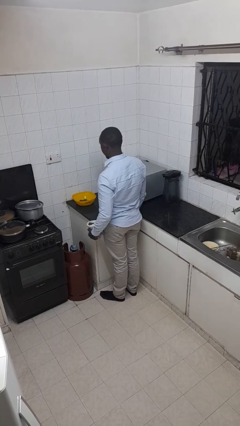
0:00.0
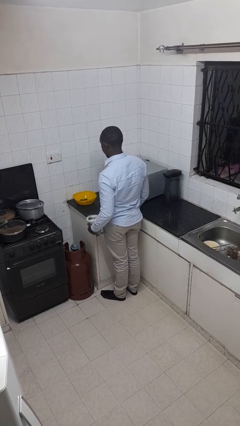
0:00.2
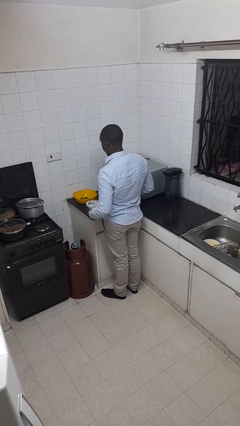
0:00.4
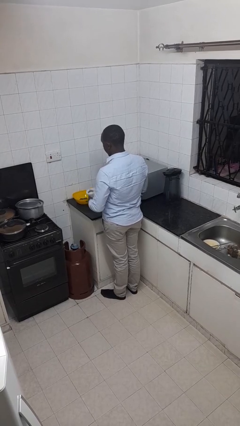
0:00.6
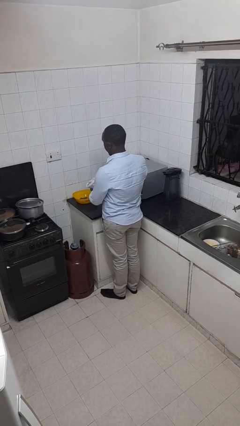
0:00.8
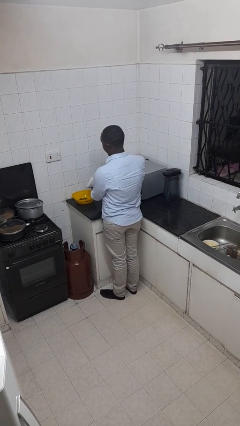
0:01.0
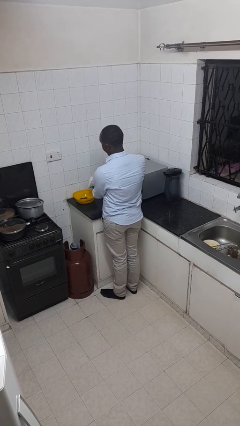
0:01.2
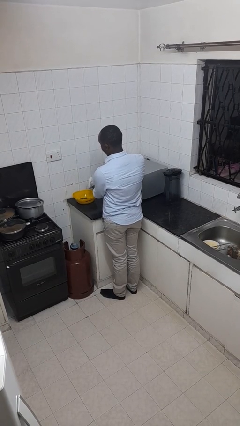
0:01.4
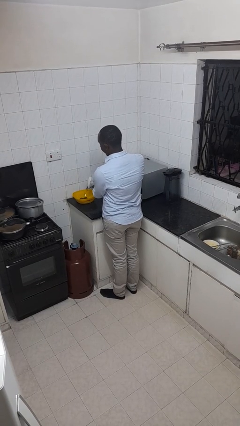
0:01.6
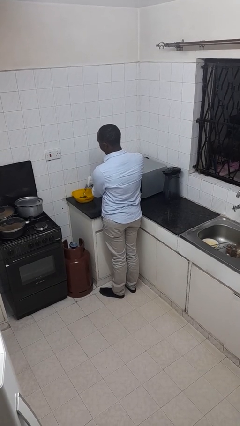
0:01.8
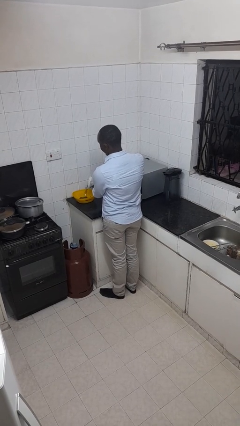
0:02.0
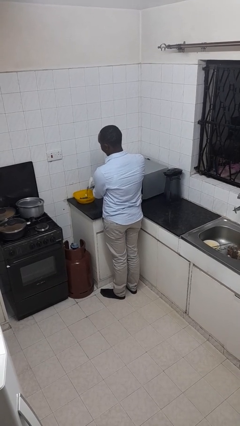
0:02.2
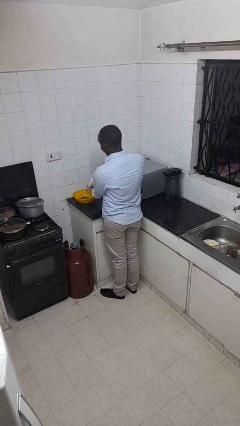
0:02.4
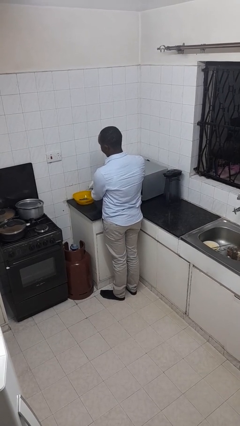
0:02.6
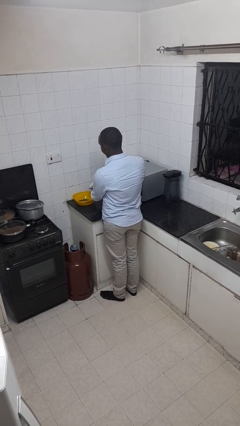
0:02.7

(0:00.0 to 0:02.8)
person pours into bowl

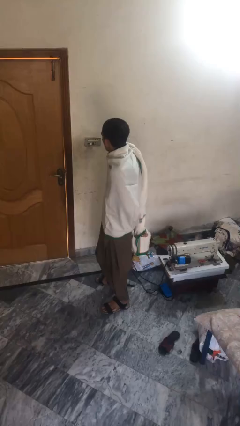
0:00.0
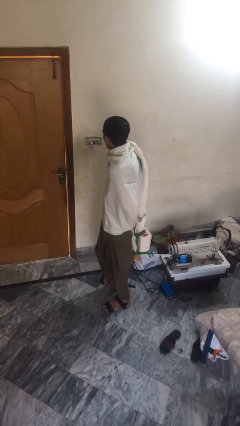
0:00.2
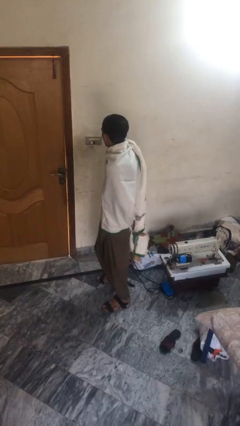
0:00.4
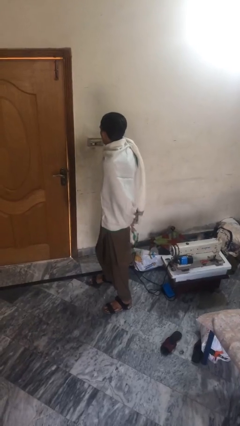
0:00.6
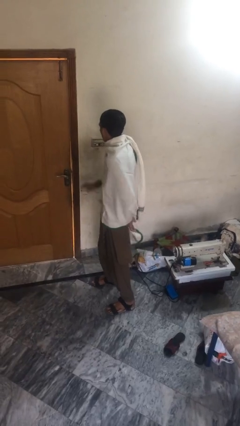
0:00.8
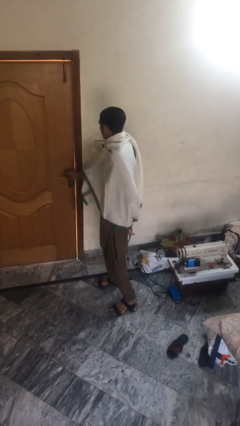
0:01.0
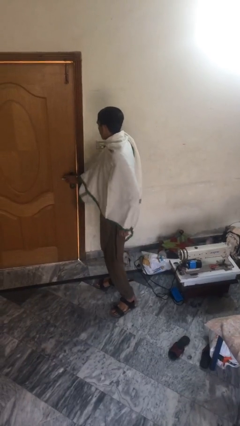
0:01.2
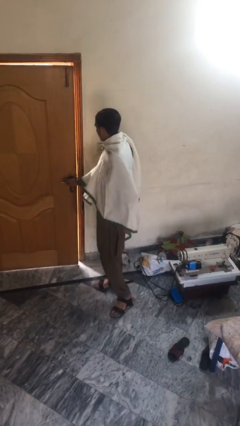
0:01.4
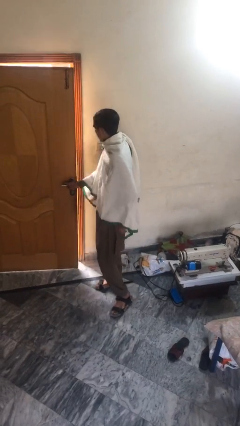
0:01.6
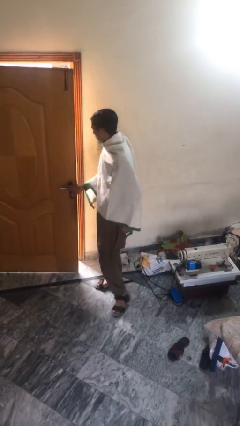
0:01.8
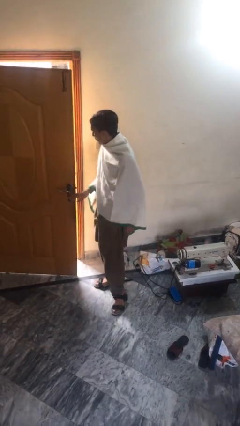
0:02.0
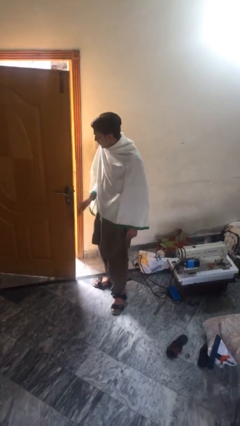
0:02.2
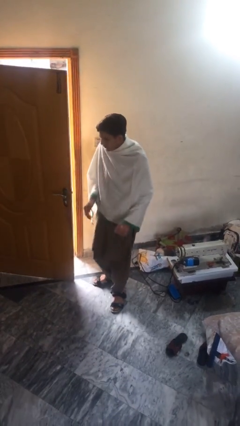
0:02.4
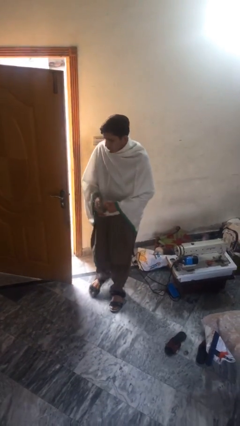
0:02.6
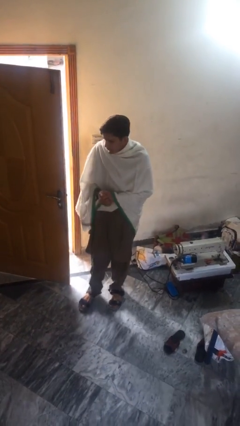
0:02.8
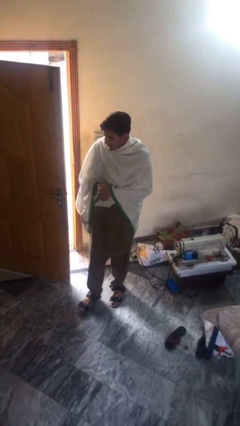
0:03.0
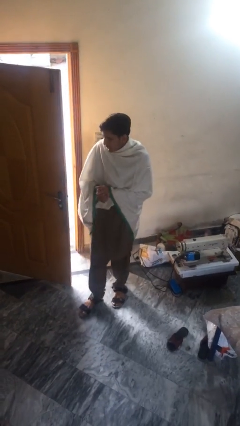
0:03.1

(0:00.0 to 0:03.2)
person opens facility door

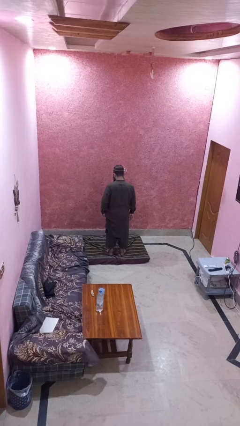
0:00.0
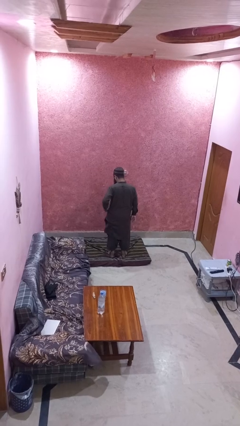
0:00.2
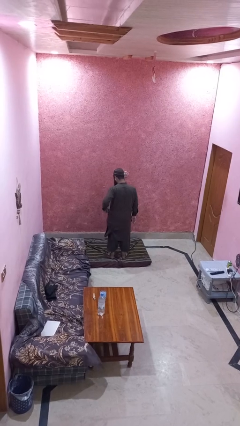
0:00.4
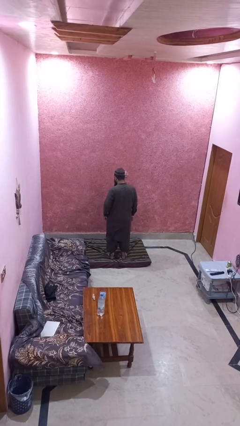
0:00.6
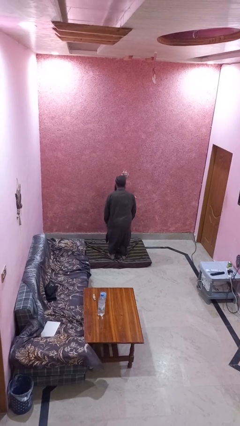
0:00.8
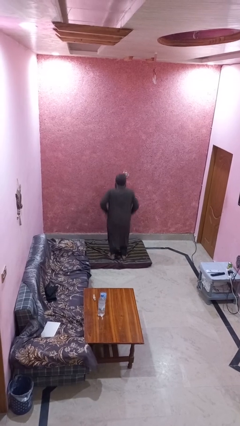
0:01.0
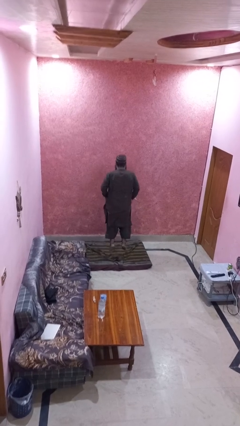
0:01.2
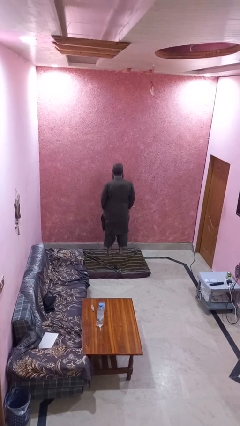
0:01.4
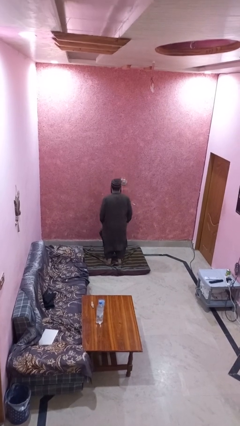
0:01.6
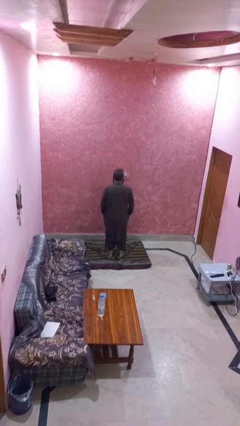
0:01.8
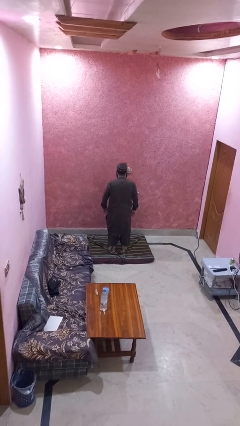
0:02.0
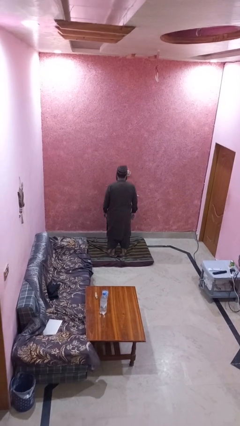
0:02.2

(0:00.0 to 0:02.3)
person jumps

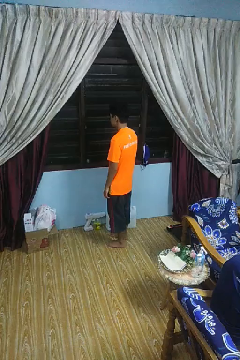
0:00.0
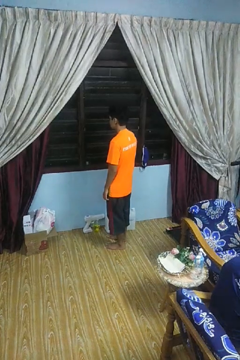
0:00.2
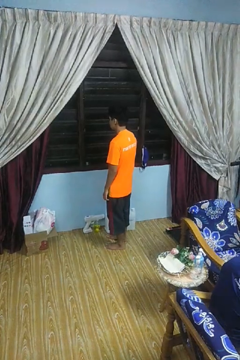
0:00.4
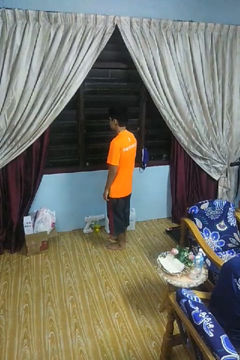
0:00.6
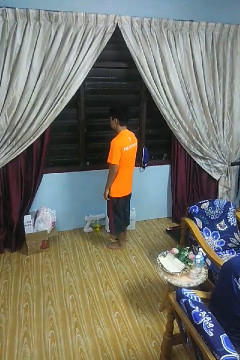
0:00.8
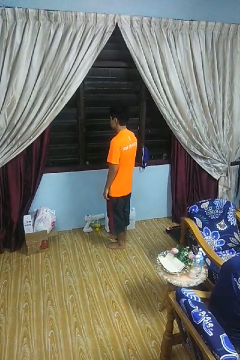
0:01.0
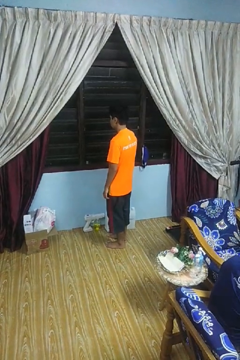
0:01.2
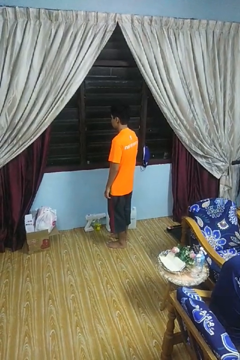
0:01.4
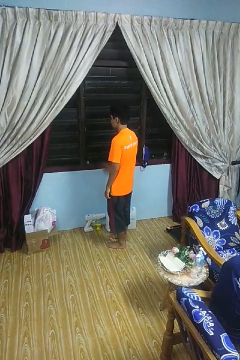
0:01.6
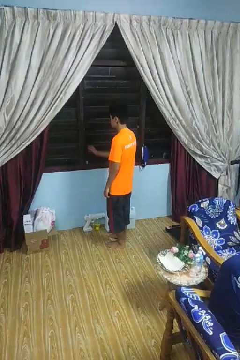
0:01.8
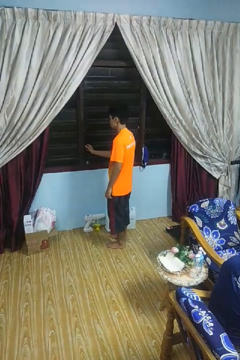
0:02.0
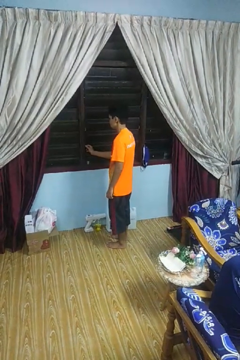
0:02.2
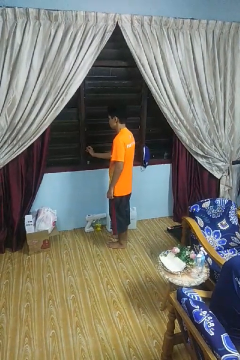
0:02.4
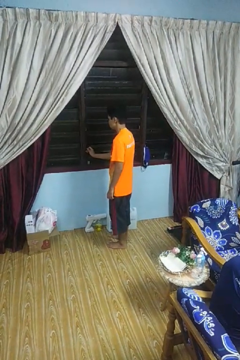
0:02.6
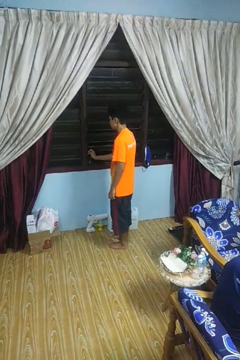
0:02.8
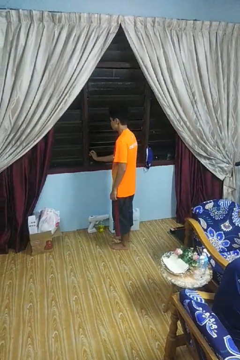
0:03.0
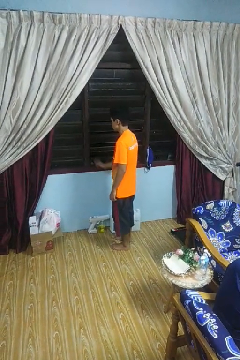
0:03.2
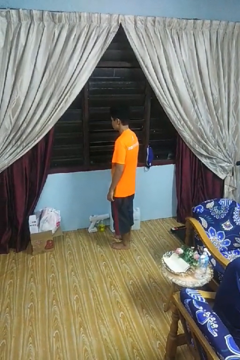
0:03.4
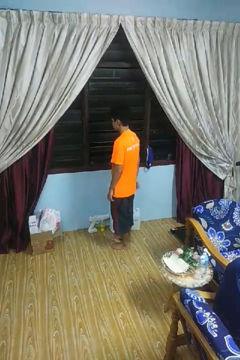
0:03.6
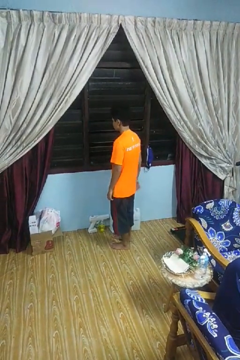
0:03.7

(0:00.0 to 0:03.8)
person opens home window

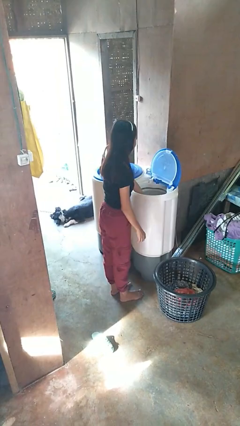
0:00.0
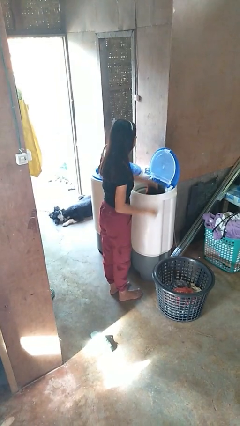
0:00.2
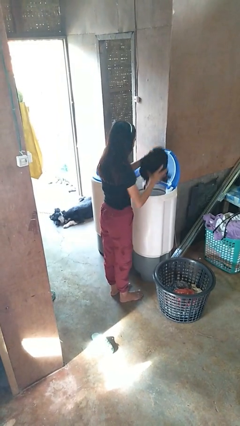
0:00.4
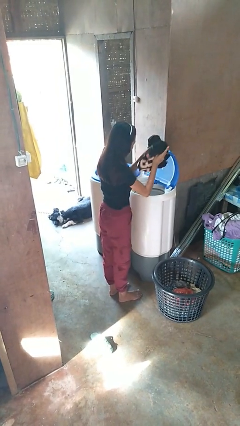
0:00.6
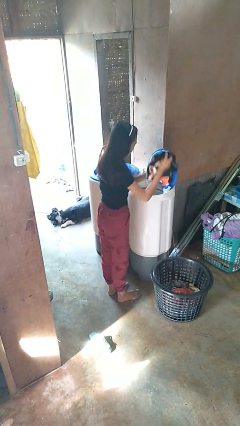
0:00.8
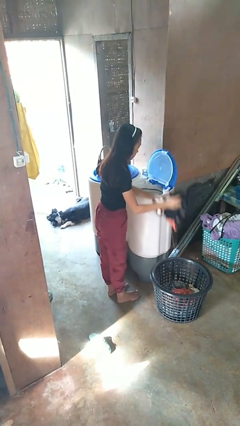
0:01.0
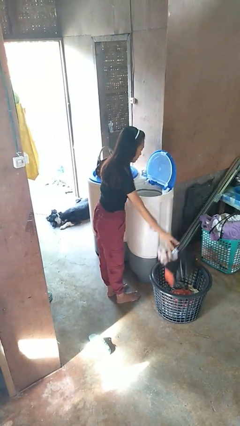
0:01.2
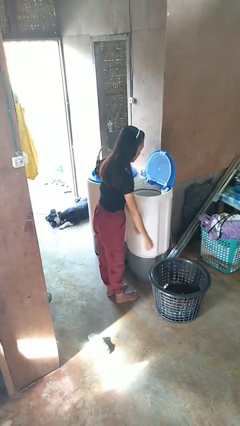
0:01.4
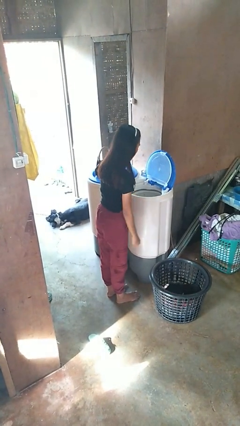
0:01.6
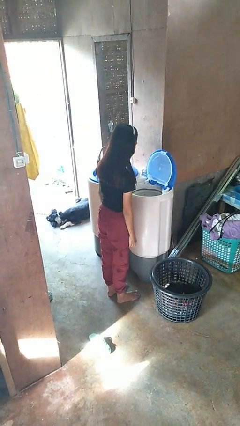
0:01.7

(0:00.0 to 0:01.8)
person unloads clotheswasher

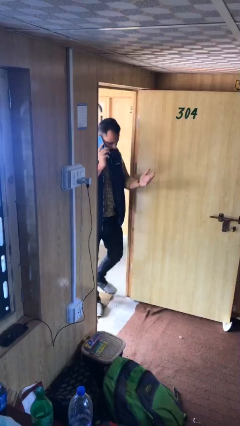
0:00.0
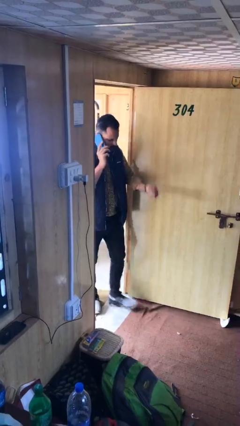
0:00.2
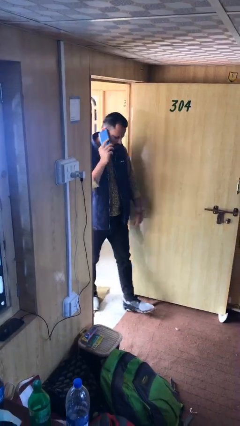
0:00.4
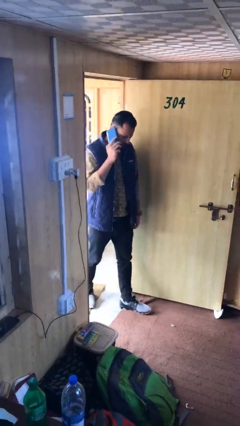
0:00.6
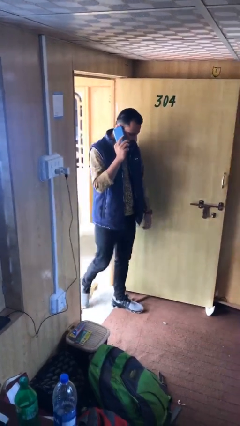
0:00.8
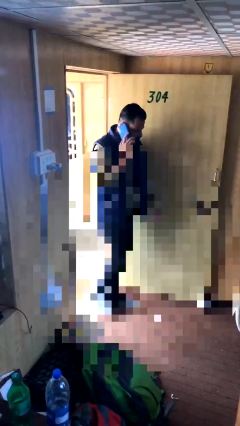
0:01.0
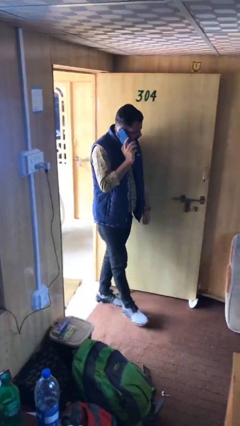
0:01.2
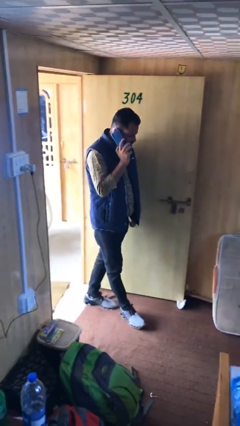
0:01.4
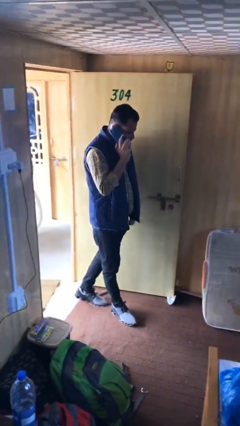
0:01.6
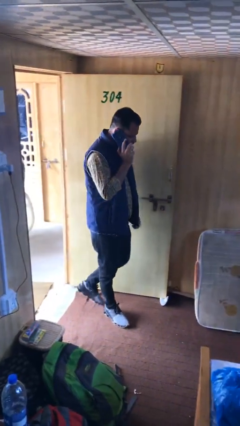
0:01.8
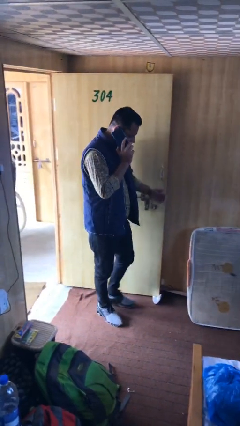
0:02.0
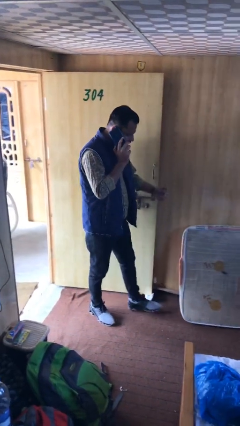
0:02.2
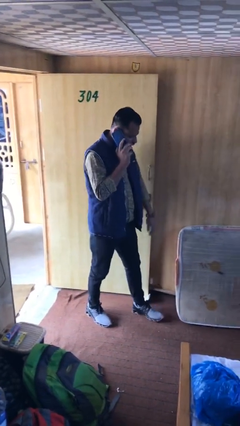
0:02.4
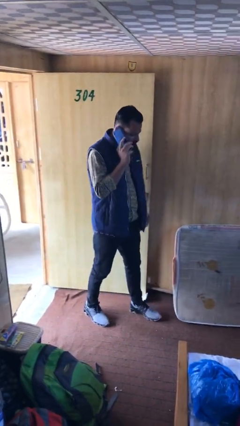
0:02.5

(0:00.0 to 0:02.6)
person enters scene through structure

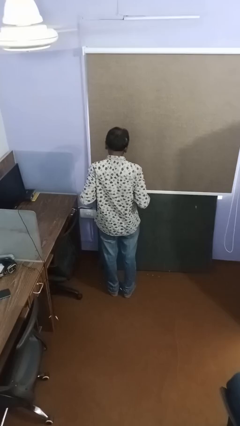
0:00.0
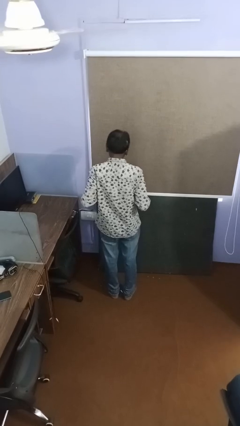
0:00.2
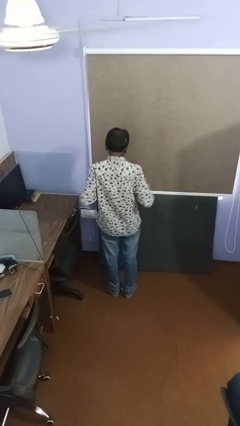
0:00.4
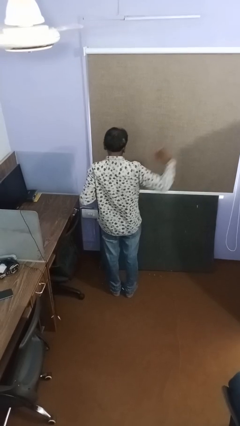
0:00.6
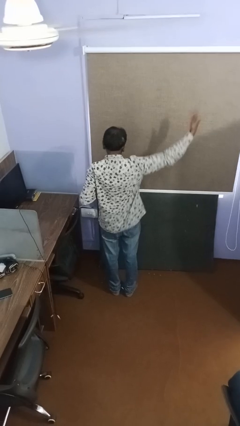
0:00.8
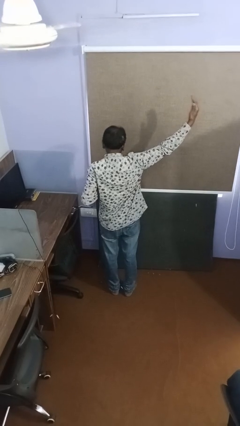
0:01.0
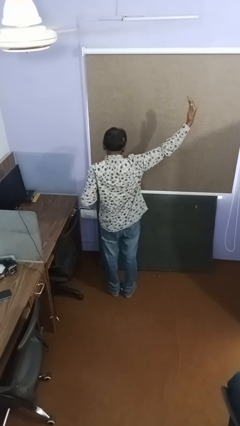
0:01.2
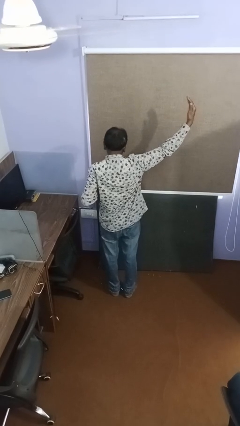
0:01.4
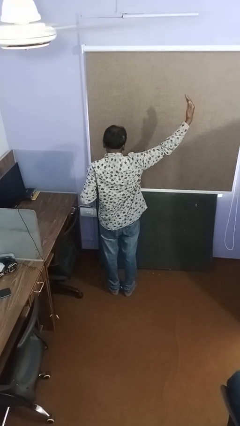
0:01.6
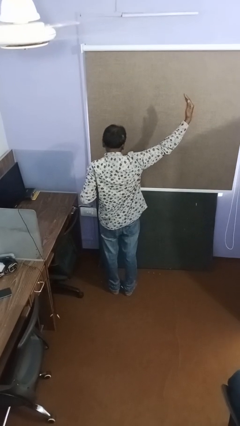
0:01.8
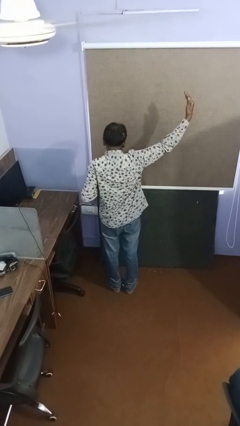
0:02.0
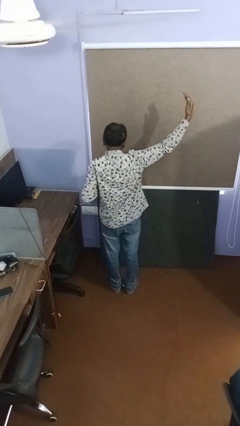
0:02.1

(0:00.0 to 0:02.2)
person gestures swipe right
